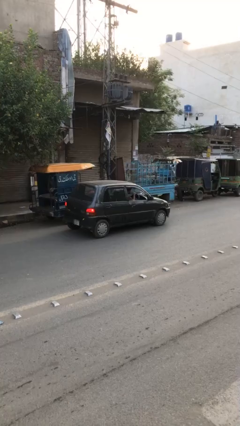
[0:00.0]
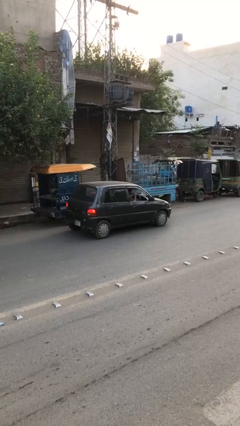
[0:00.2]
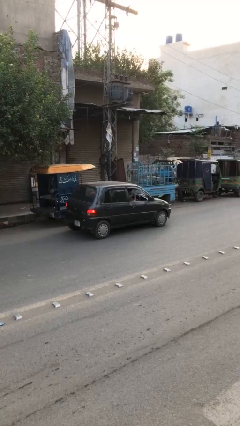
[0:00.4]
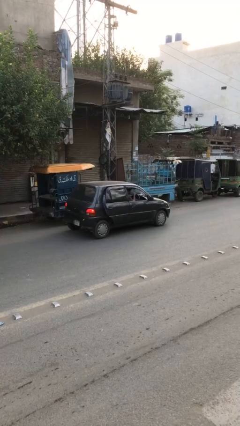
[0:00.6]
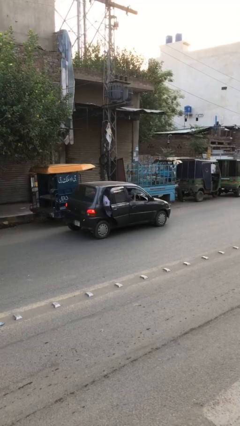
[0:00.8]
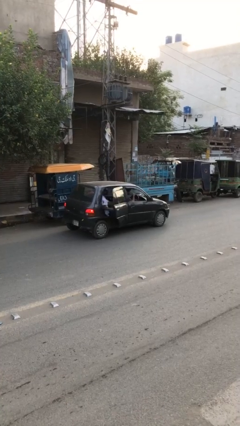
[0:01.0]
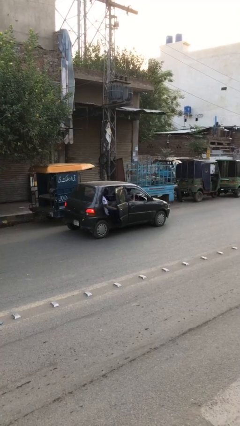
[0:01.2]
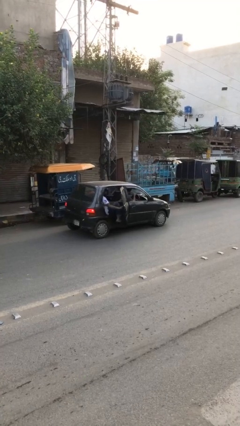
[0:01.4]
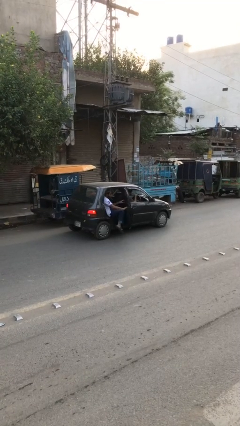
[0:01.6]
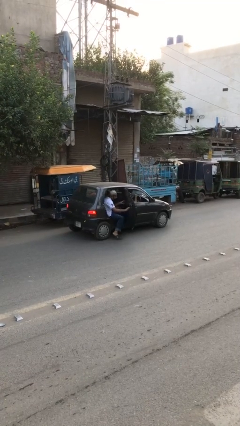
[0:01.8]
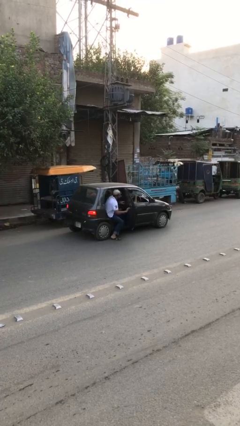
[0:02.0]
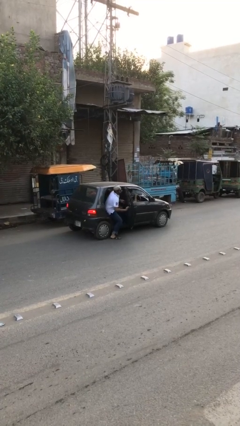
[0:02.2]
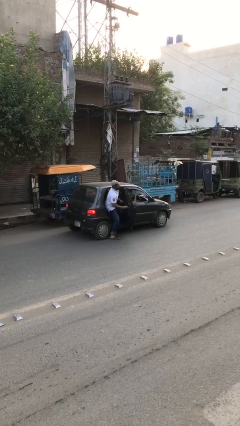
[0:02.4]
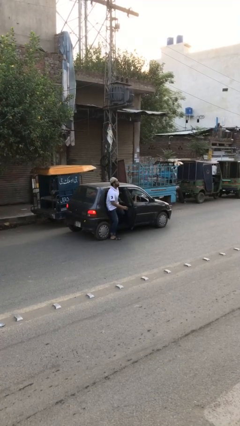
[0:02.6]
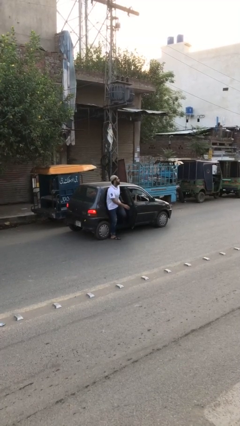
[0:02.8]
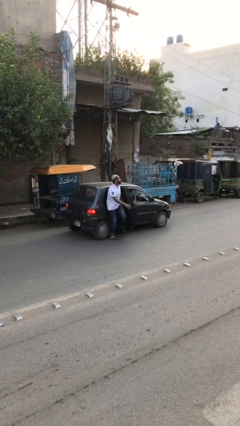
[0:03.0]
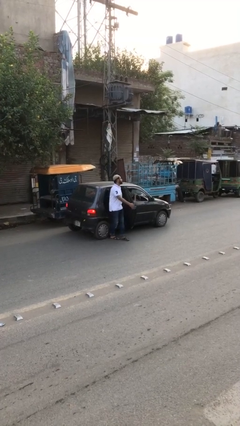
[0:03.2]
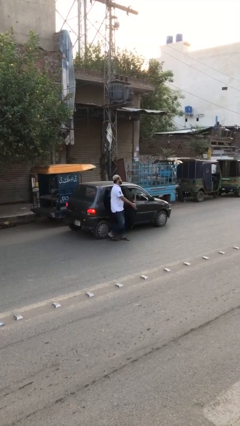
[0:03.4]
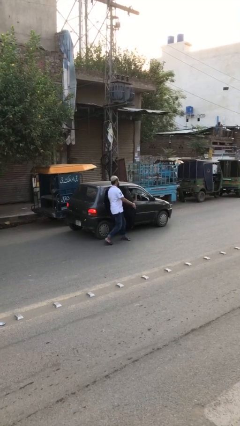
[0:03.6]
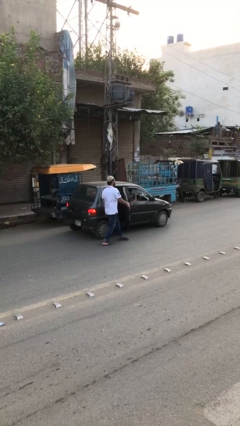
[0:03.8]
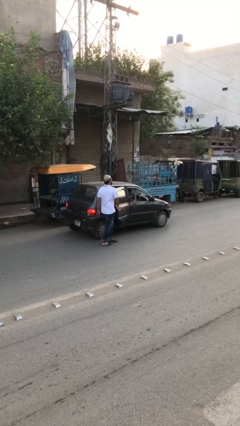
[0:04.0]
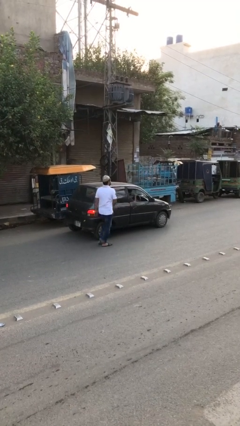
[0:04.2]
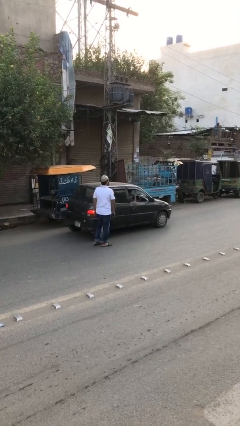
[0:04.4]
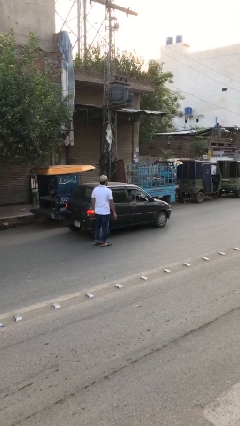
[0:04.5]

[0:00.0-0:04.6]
car drops off person

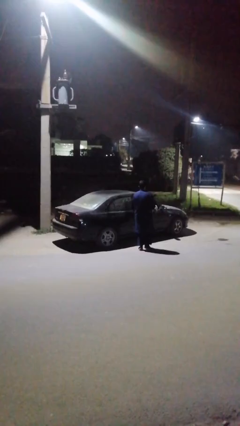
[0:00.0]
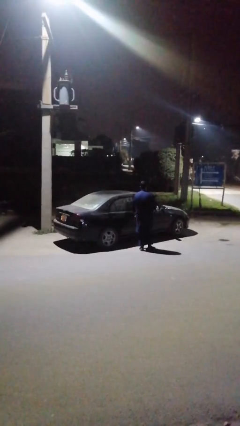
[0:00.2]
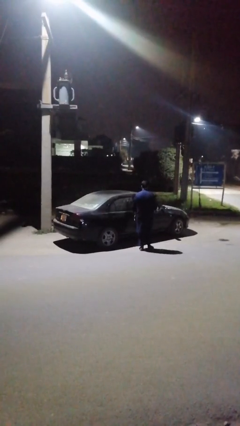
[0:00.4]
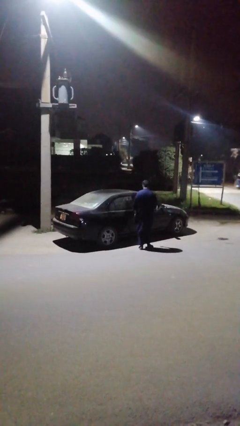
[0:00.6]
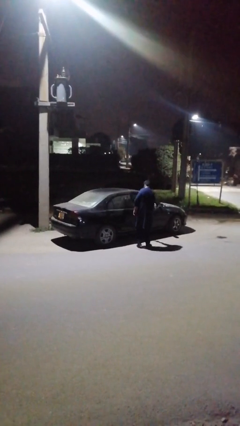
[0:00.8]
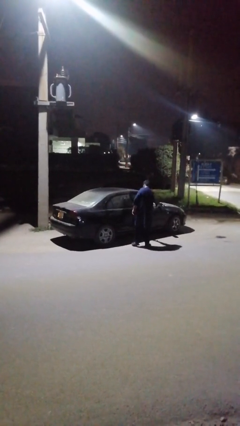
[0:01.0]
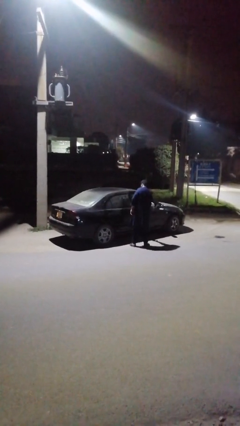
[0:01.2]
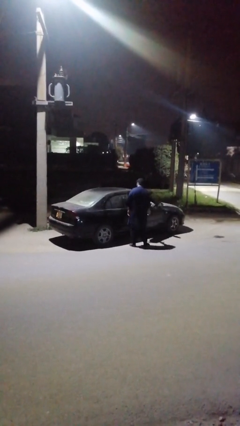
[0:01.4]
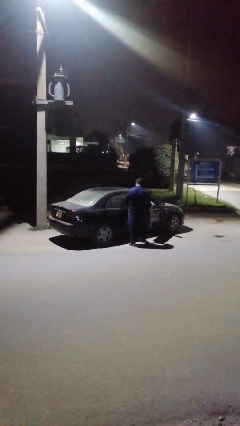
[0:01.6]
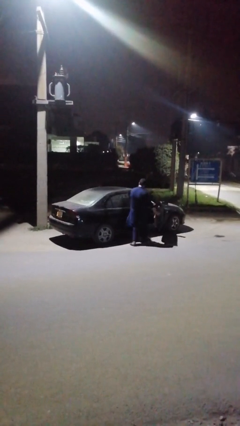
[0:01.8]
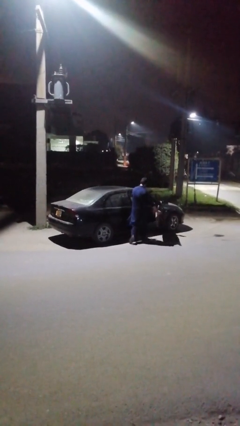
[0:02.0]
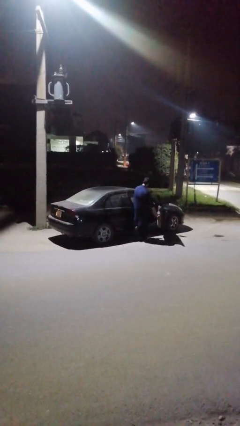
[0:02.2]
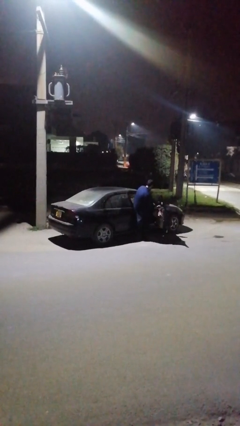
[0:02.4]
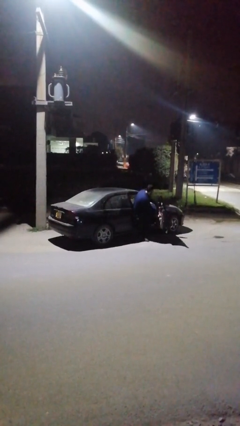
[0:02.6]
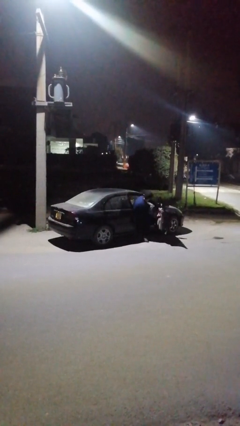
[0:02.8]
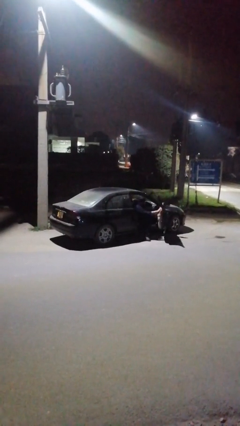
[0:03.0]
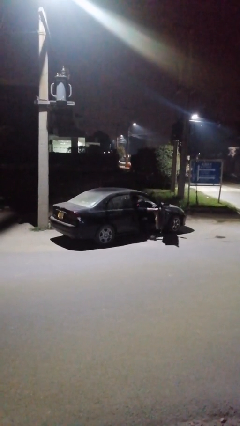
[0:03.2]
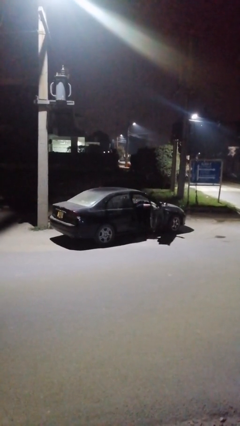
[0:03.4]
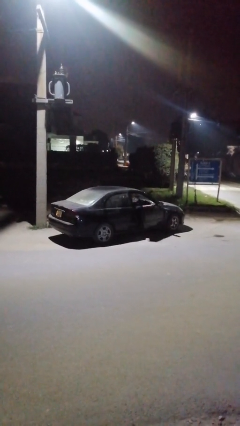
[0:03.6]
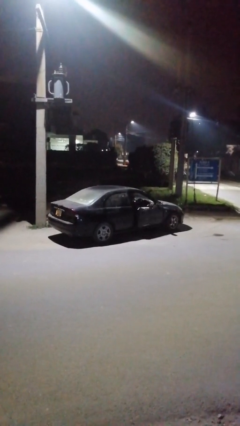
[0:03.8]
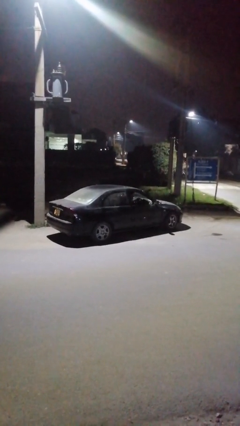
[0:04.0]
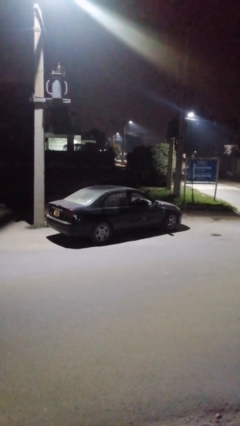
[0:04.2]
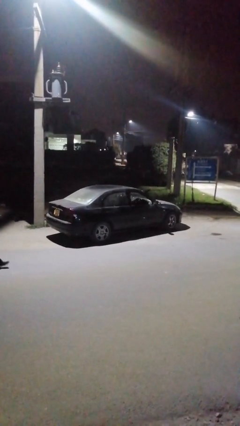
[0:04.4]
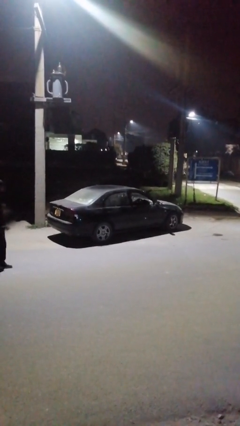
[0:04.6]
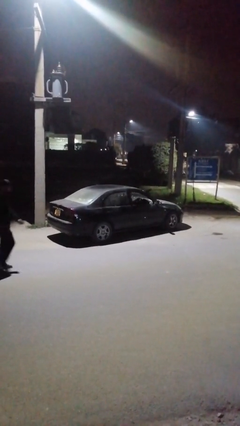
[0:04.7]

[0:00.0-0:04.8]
car picks up person

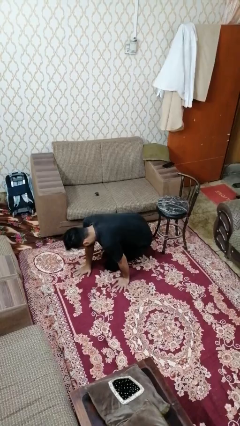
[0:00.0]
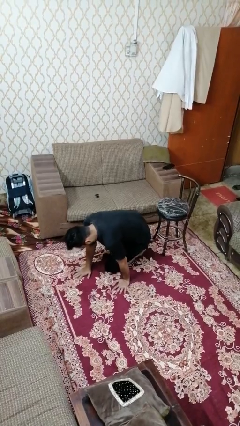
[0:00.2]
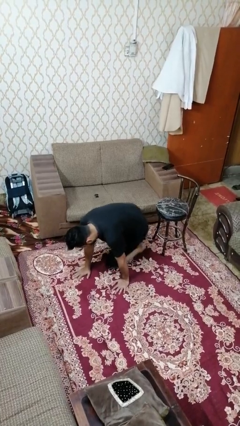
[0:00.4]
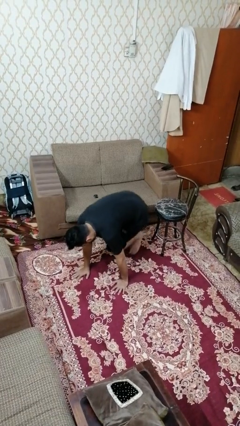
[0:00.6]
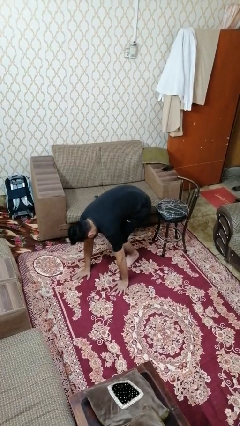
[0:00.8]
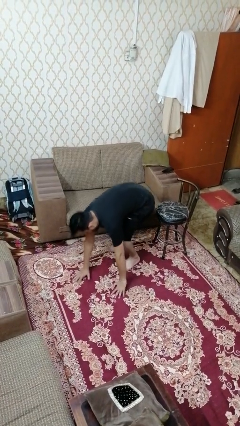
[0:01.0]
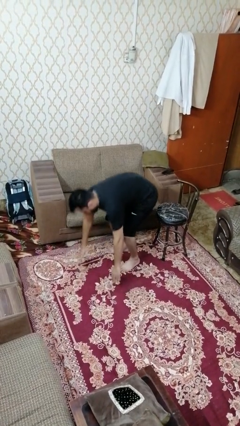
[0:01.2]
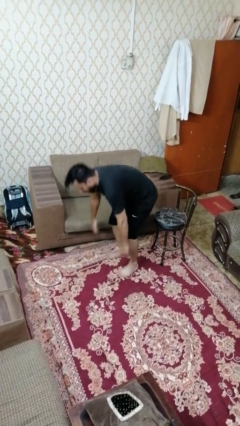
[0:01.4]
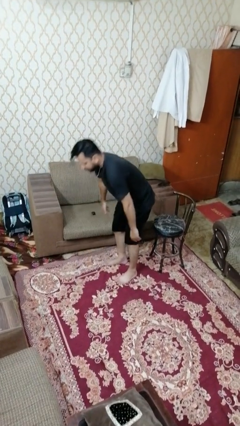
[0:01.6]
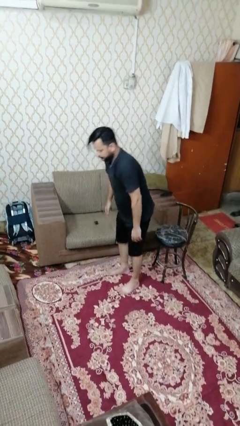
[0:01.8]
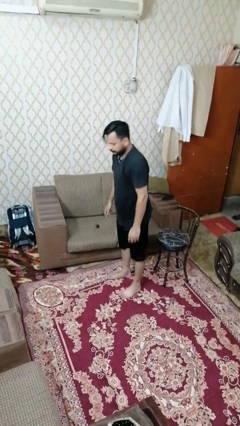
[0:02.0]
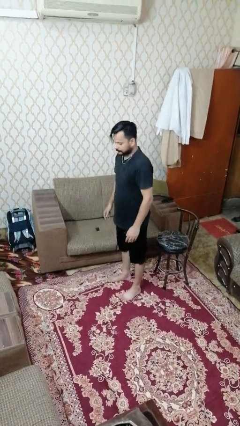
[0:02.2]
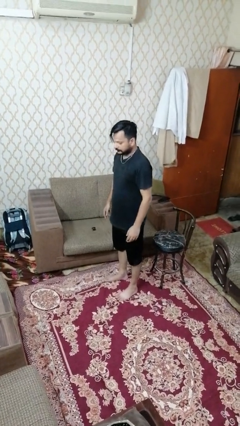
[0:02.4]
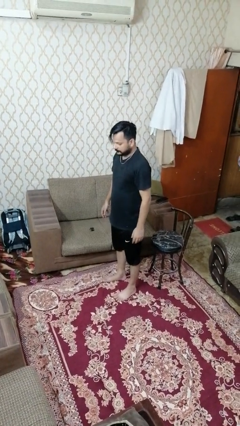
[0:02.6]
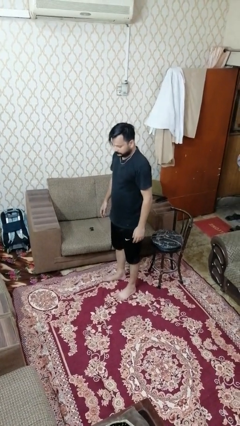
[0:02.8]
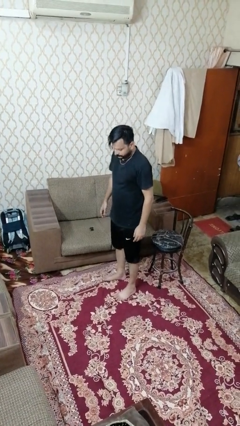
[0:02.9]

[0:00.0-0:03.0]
person stands up from floor

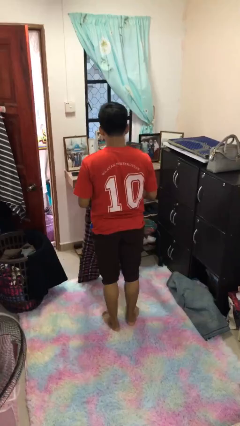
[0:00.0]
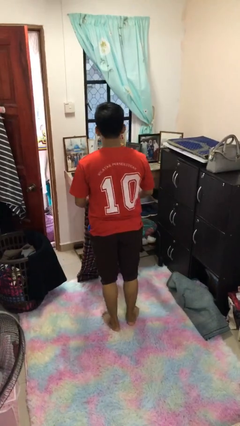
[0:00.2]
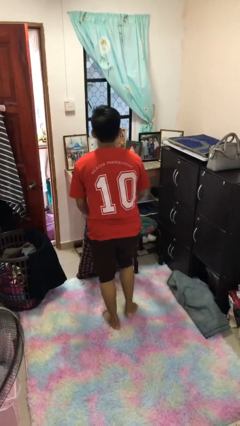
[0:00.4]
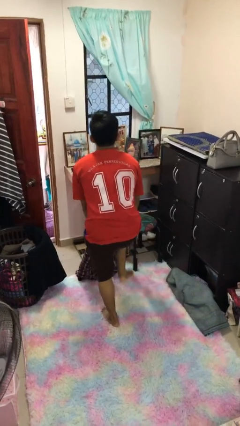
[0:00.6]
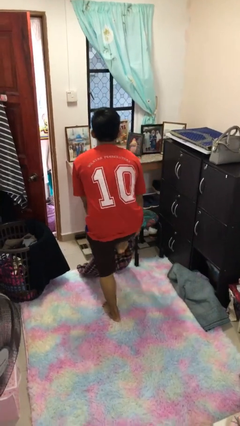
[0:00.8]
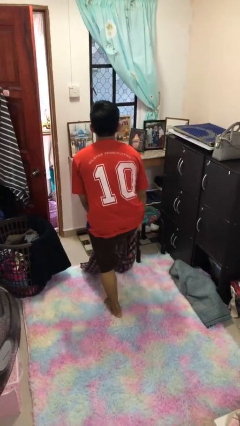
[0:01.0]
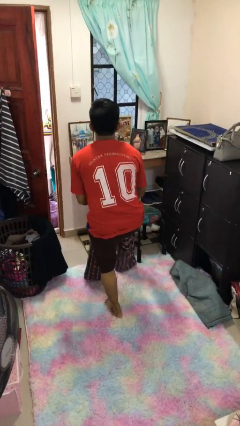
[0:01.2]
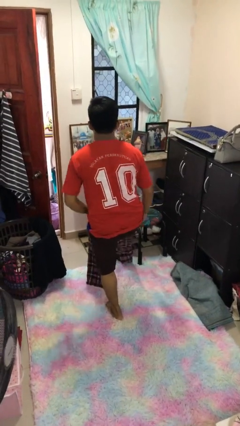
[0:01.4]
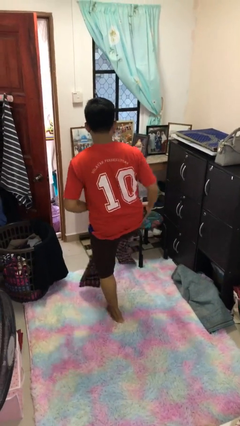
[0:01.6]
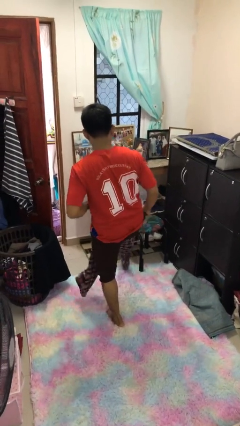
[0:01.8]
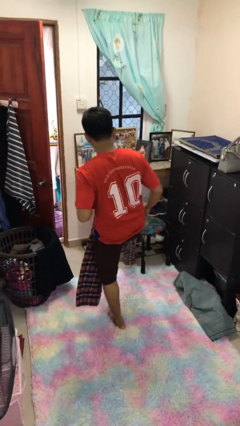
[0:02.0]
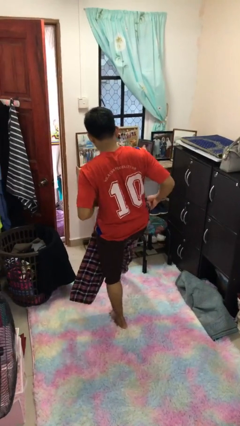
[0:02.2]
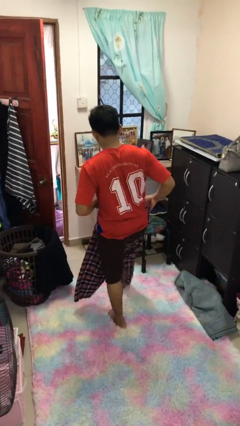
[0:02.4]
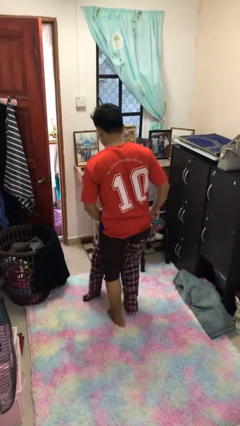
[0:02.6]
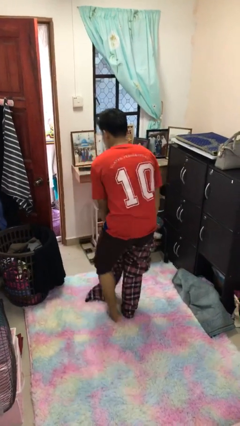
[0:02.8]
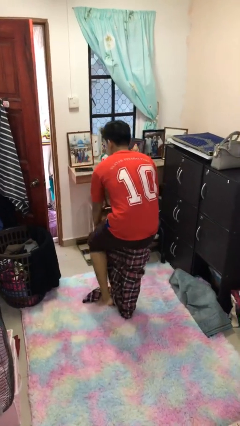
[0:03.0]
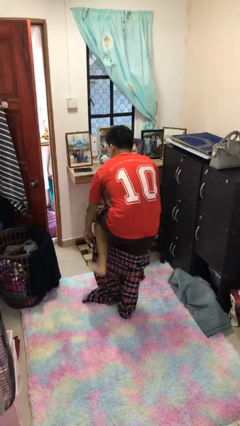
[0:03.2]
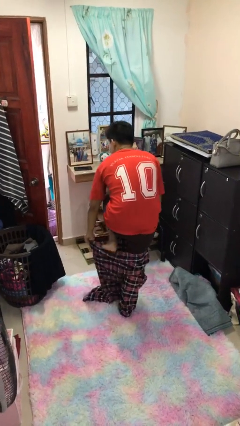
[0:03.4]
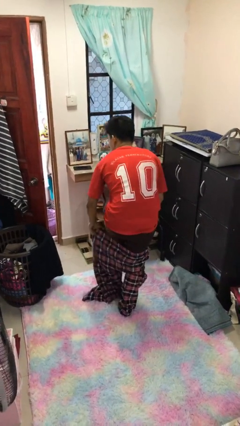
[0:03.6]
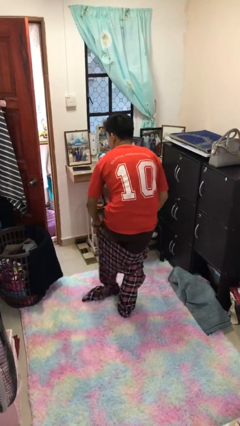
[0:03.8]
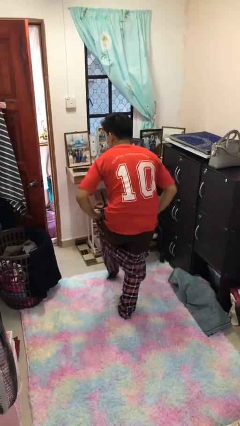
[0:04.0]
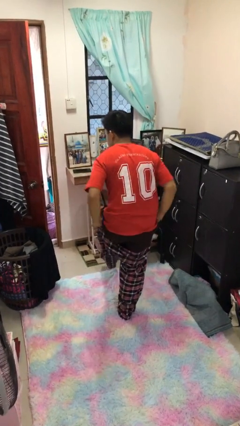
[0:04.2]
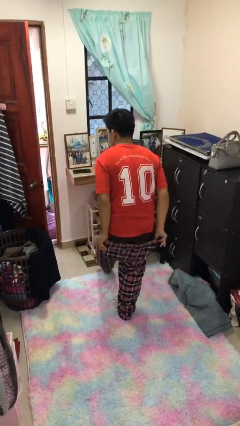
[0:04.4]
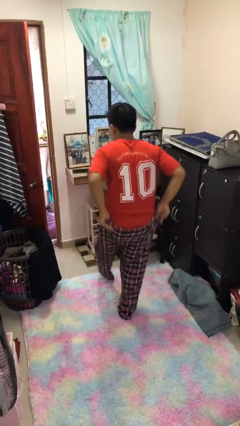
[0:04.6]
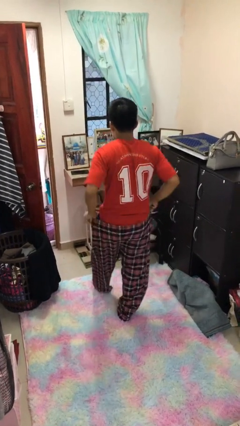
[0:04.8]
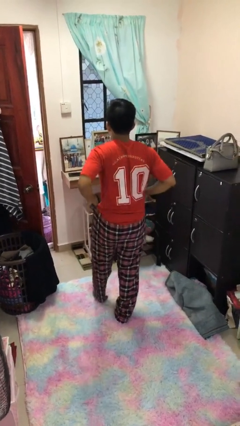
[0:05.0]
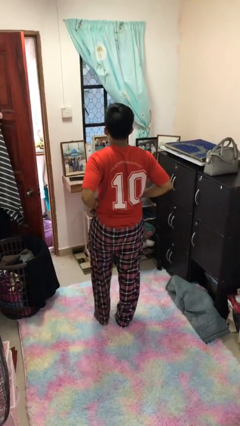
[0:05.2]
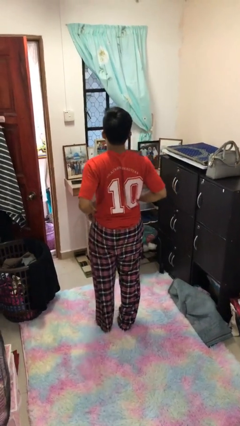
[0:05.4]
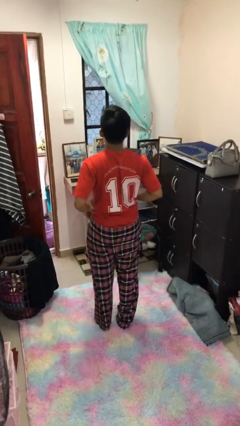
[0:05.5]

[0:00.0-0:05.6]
person puts on pants
